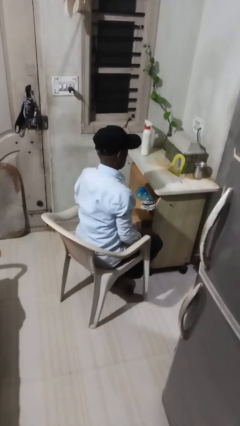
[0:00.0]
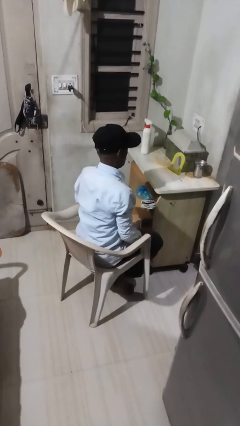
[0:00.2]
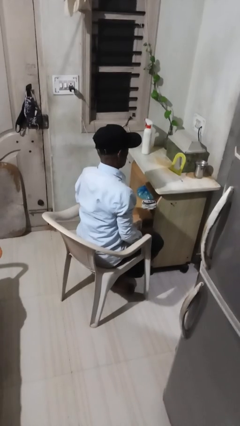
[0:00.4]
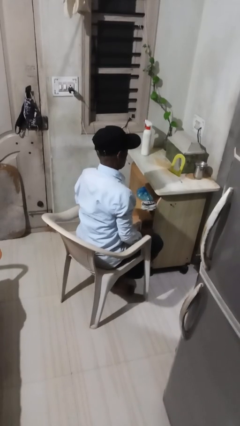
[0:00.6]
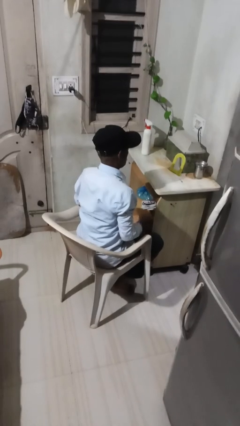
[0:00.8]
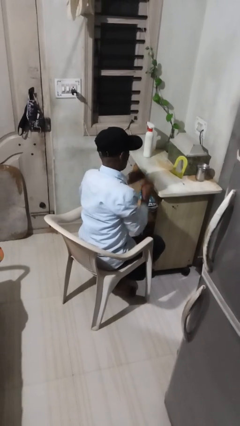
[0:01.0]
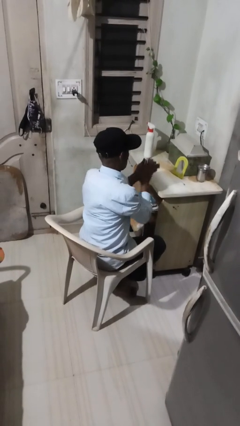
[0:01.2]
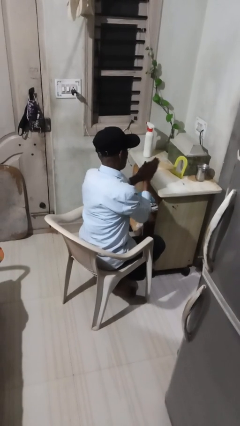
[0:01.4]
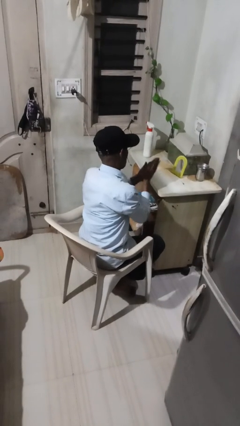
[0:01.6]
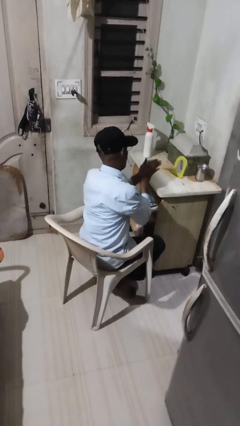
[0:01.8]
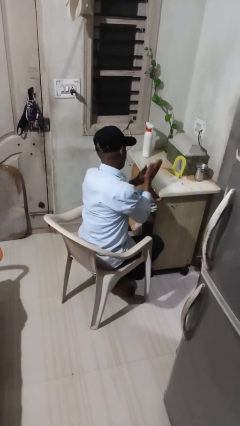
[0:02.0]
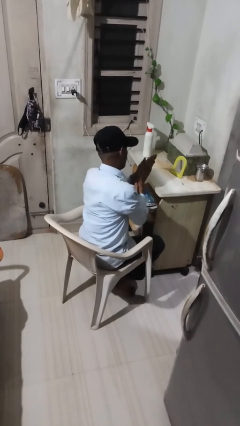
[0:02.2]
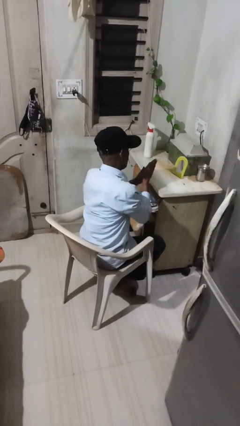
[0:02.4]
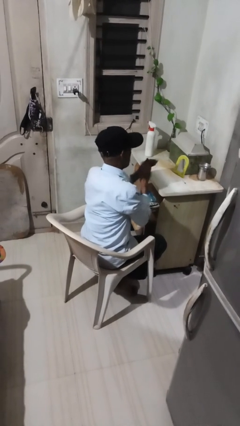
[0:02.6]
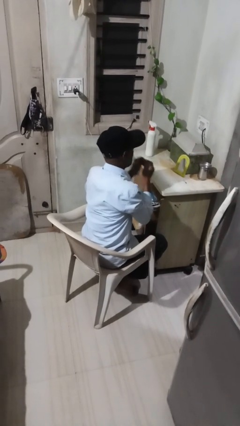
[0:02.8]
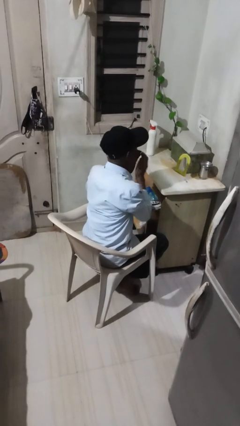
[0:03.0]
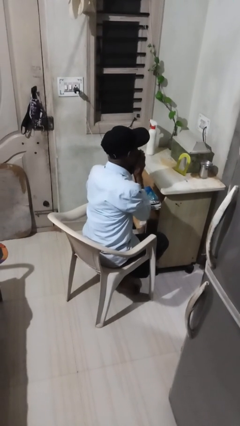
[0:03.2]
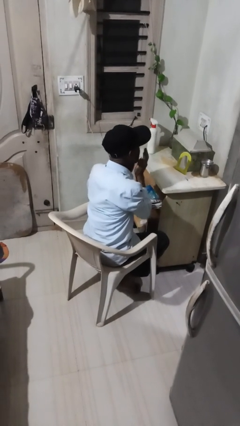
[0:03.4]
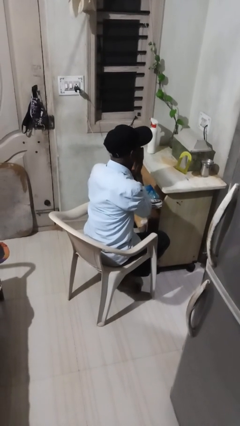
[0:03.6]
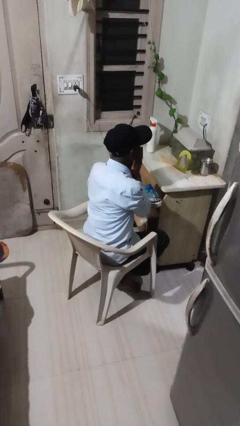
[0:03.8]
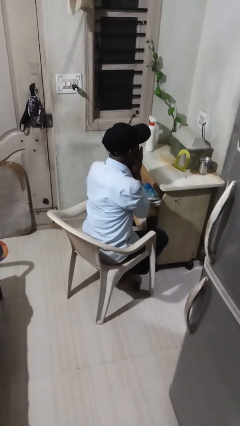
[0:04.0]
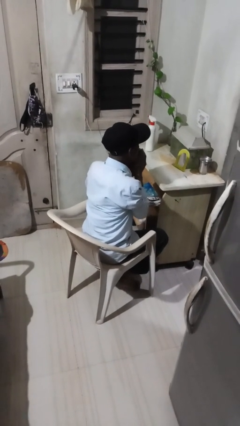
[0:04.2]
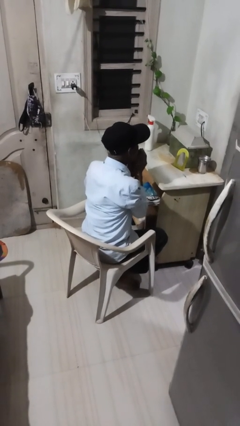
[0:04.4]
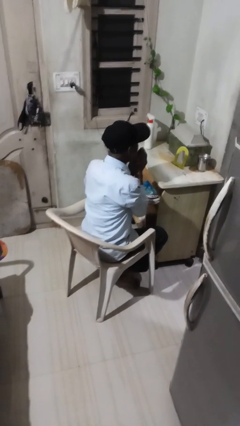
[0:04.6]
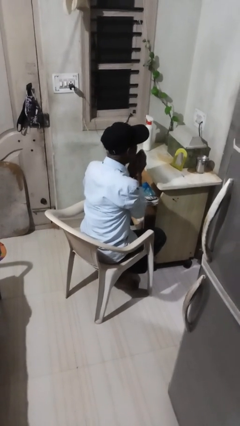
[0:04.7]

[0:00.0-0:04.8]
person blows into hands

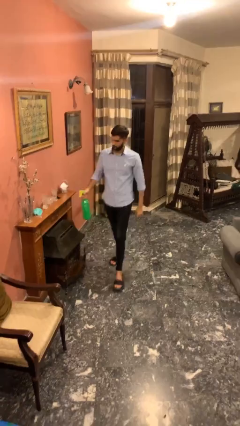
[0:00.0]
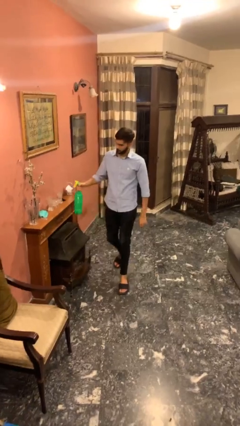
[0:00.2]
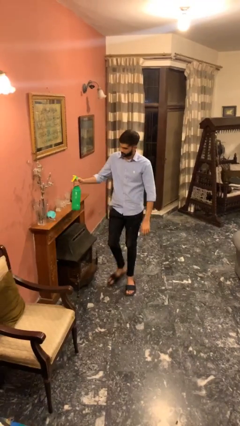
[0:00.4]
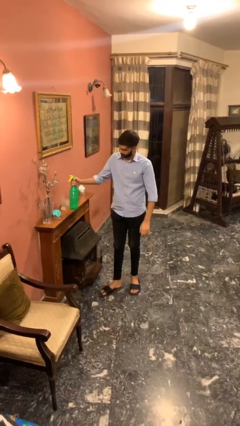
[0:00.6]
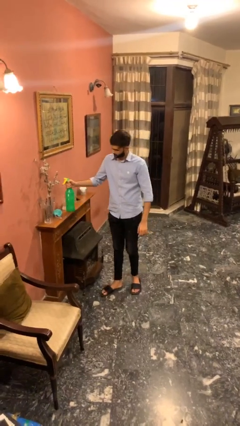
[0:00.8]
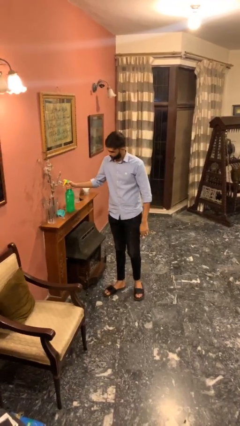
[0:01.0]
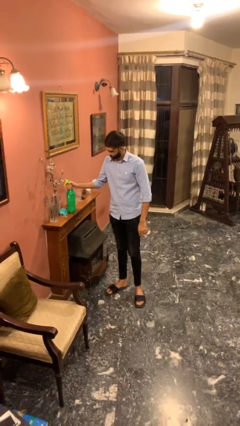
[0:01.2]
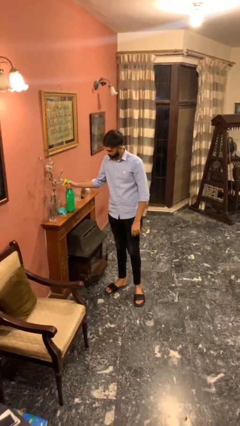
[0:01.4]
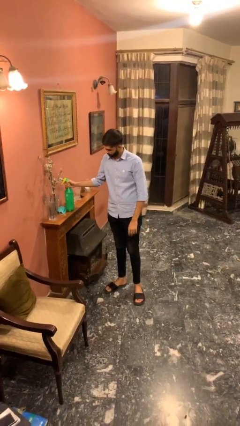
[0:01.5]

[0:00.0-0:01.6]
person puts down object on table

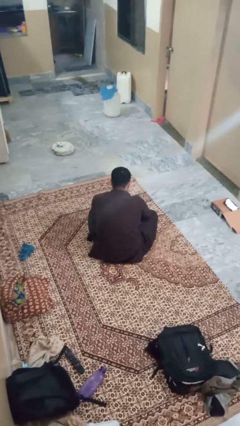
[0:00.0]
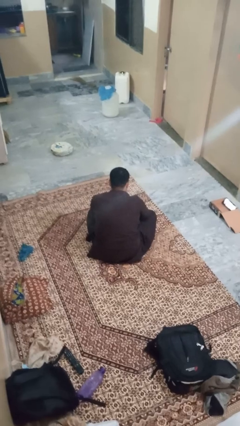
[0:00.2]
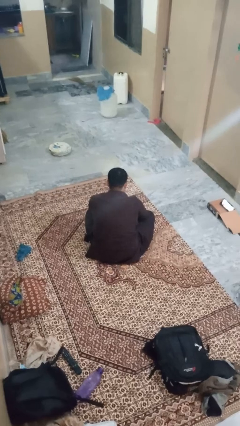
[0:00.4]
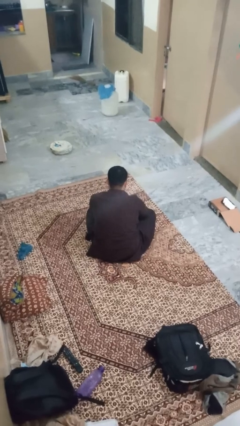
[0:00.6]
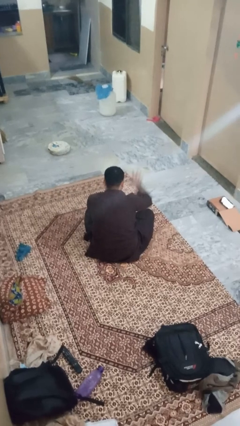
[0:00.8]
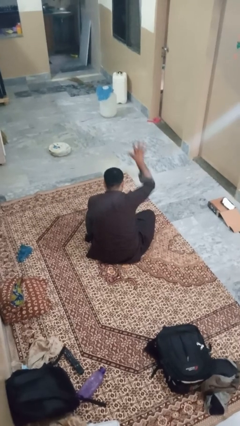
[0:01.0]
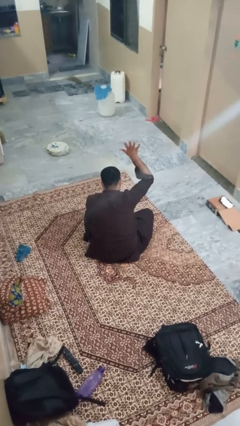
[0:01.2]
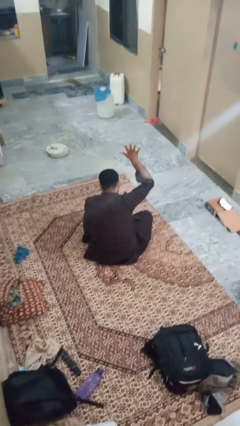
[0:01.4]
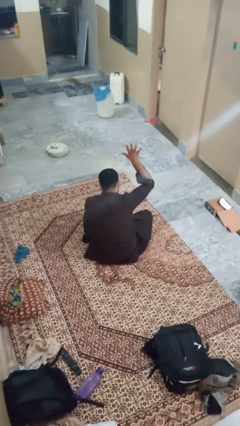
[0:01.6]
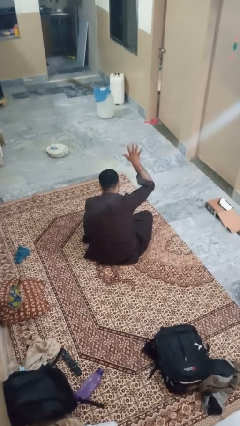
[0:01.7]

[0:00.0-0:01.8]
person gestures number five

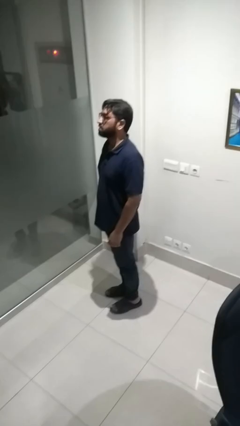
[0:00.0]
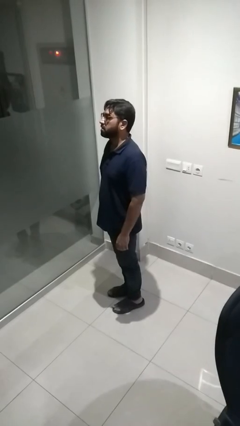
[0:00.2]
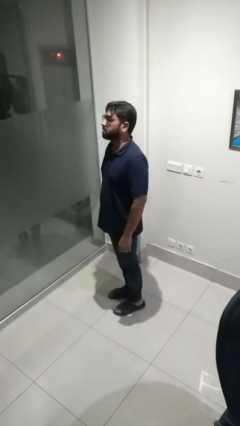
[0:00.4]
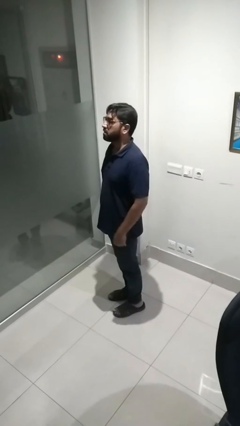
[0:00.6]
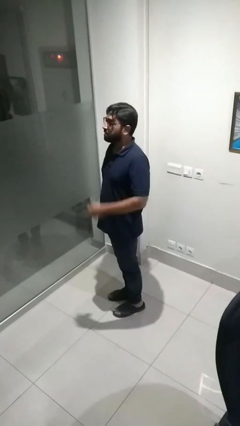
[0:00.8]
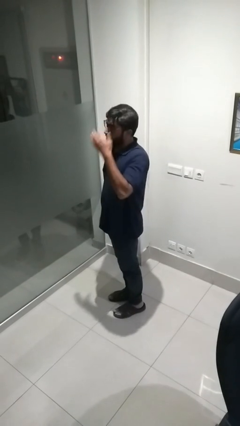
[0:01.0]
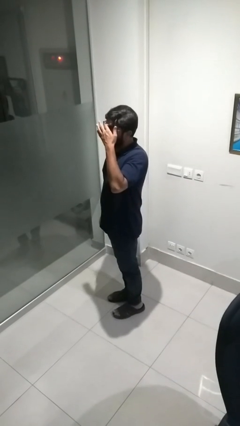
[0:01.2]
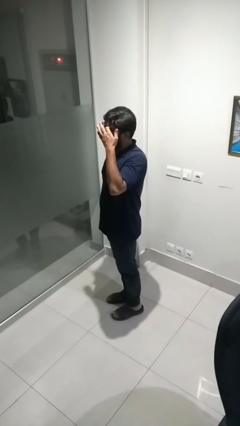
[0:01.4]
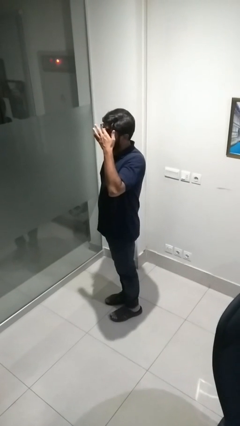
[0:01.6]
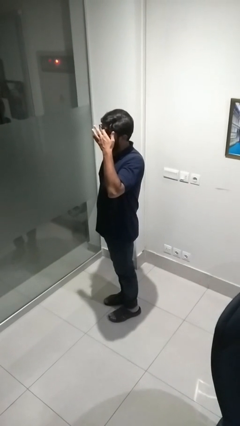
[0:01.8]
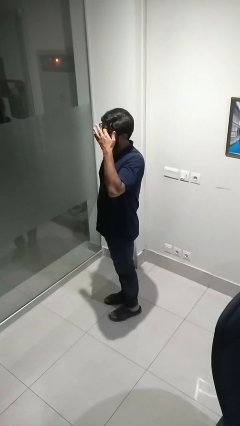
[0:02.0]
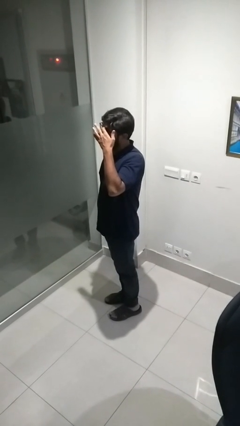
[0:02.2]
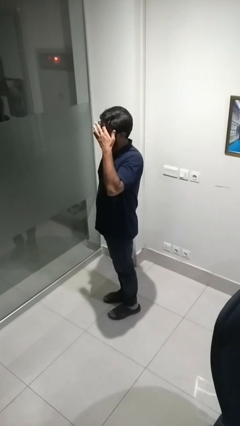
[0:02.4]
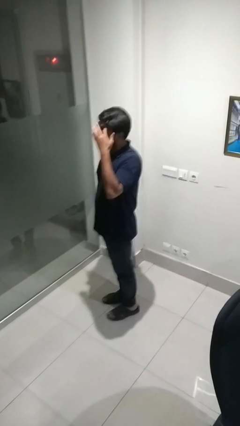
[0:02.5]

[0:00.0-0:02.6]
person scratches face

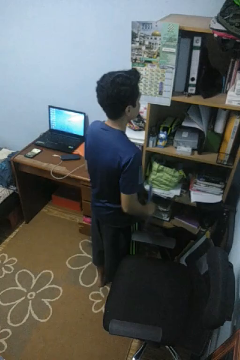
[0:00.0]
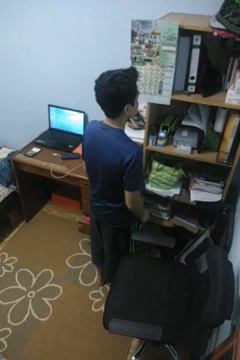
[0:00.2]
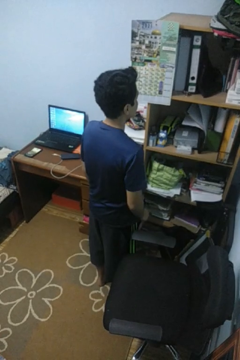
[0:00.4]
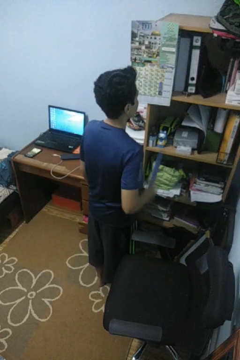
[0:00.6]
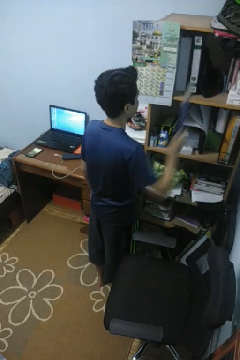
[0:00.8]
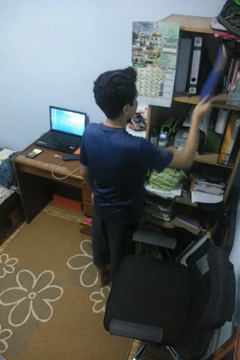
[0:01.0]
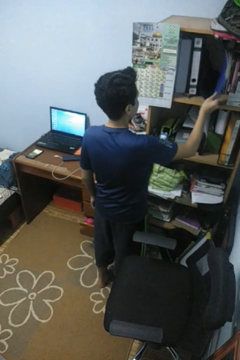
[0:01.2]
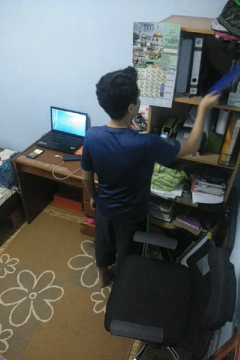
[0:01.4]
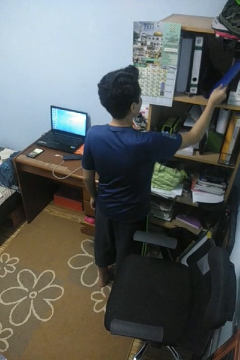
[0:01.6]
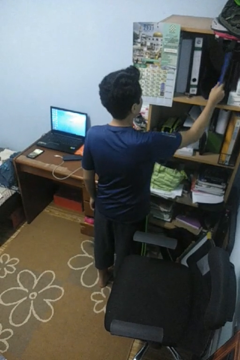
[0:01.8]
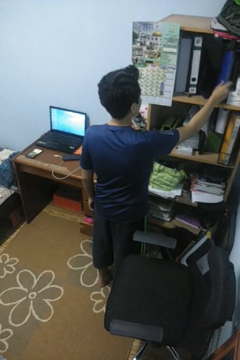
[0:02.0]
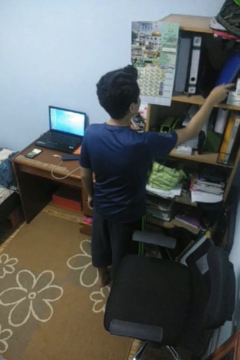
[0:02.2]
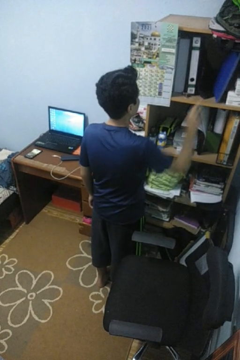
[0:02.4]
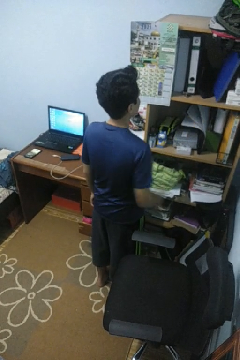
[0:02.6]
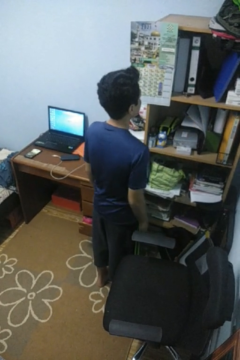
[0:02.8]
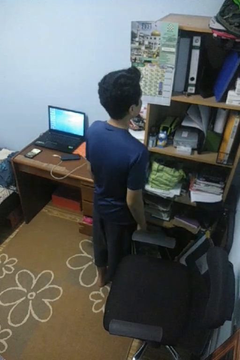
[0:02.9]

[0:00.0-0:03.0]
person puts down object into cabinet

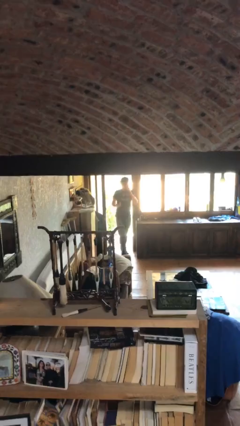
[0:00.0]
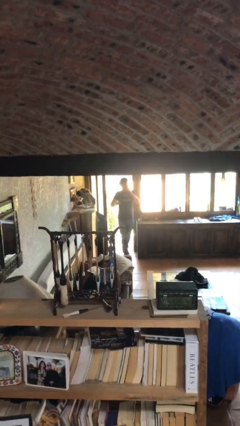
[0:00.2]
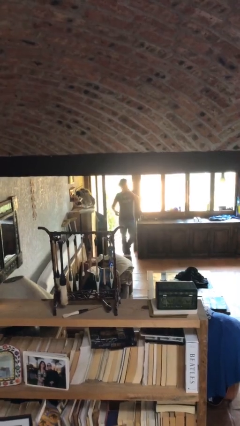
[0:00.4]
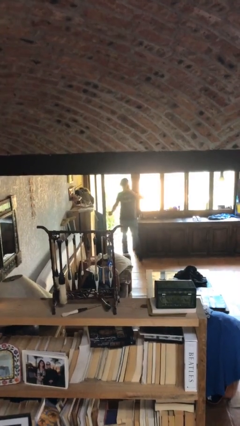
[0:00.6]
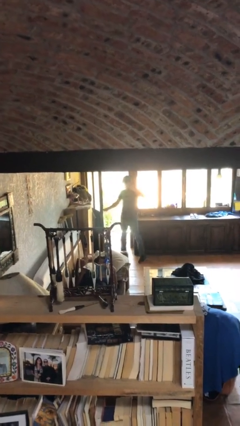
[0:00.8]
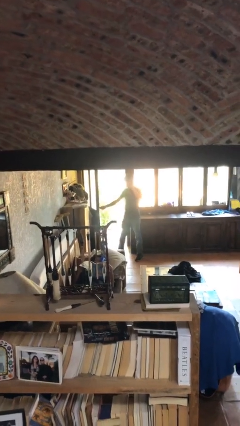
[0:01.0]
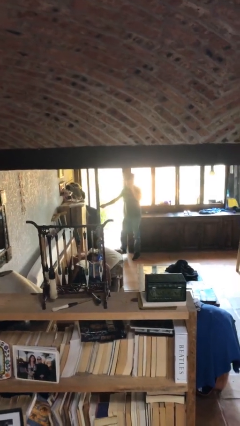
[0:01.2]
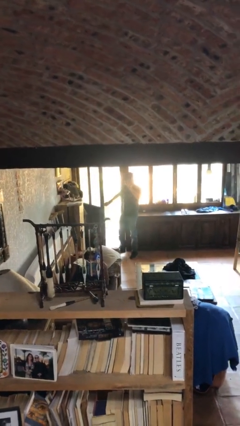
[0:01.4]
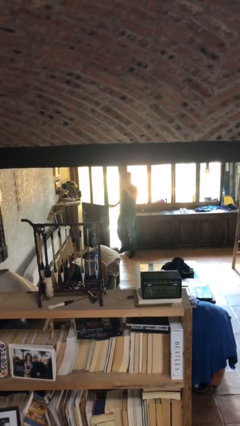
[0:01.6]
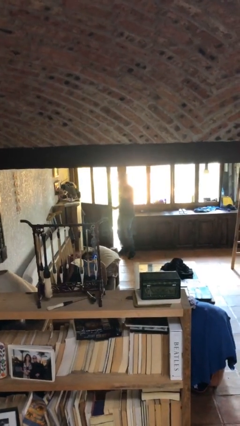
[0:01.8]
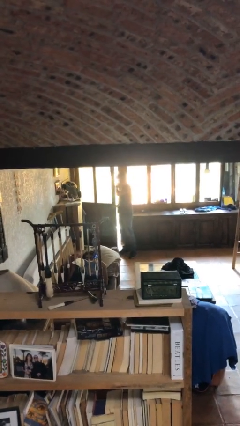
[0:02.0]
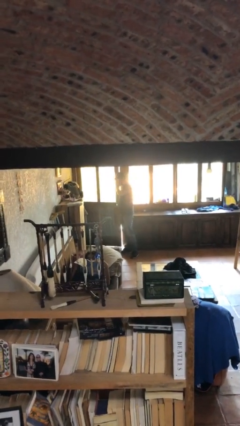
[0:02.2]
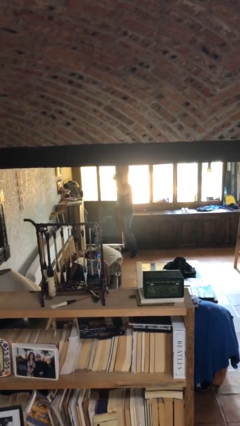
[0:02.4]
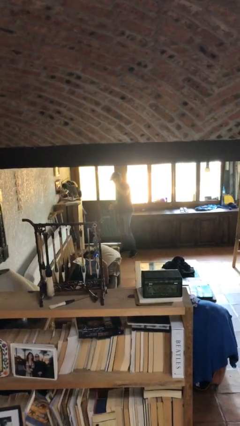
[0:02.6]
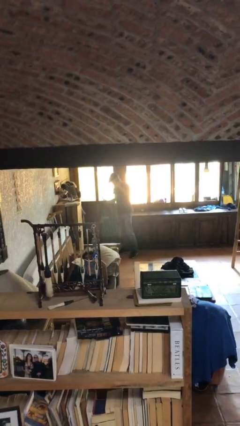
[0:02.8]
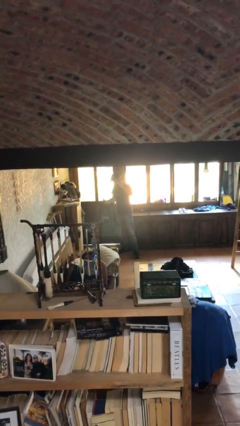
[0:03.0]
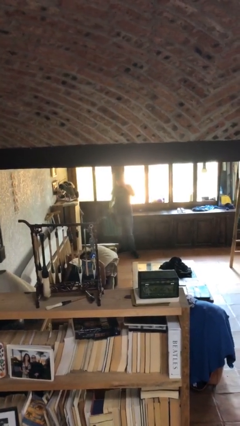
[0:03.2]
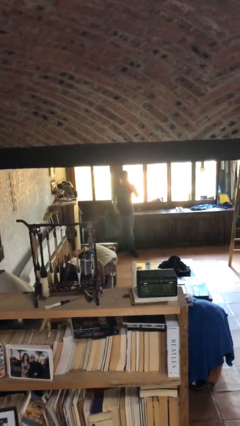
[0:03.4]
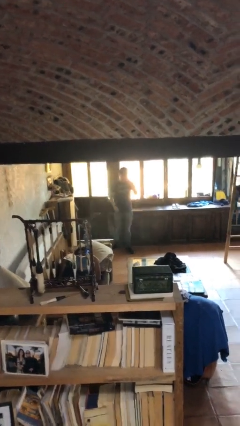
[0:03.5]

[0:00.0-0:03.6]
person closes facility door

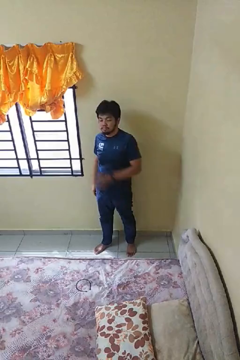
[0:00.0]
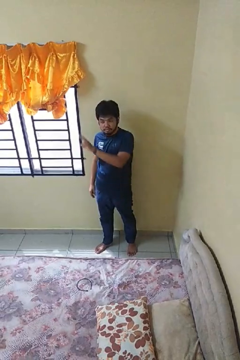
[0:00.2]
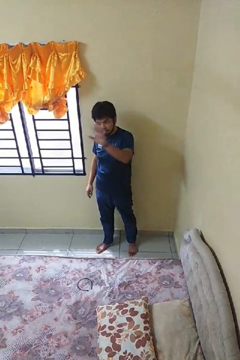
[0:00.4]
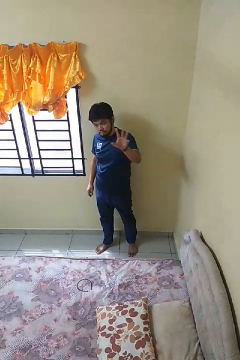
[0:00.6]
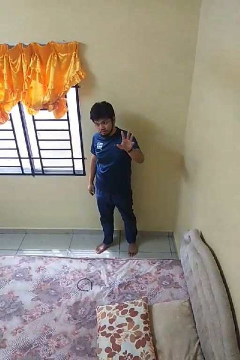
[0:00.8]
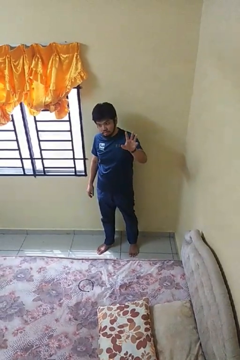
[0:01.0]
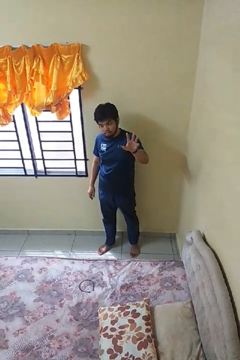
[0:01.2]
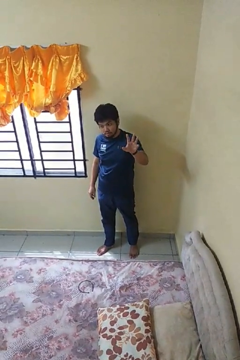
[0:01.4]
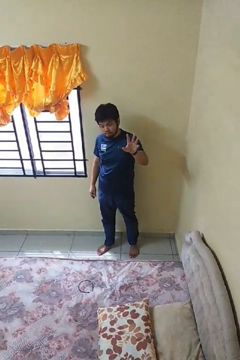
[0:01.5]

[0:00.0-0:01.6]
person gestures swipe left
